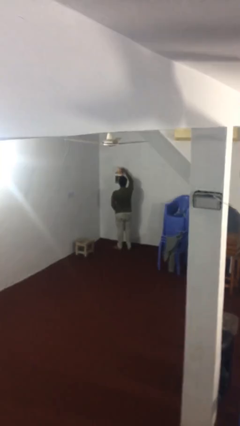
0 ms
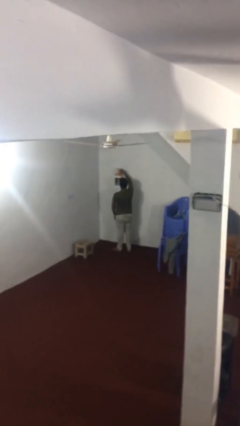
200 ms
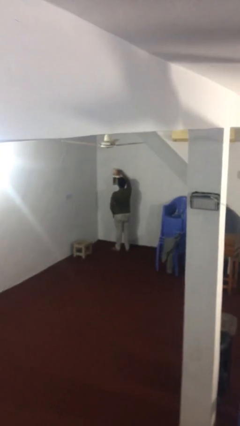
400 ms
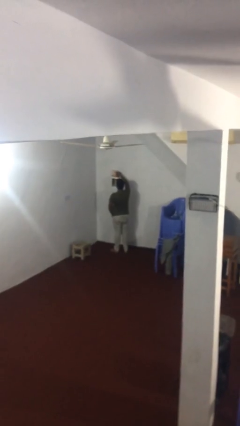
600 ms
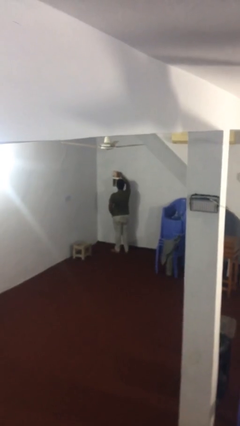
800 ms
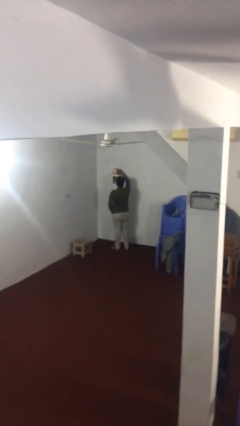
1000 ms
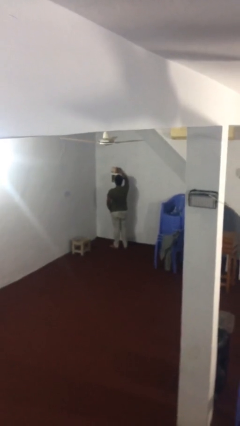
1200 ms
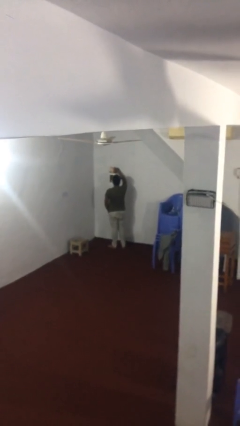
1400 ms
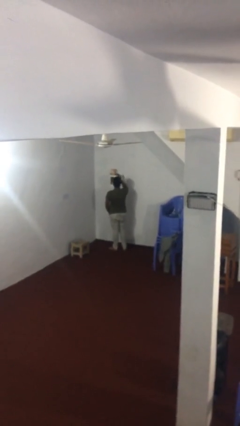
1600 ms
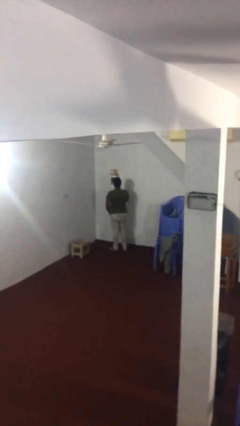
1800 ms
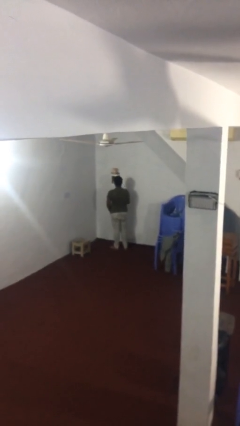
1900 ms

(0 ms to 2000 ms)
person puts down object on shelf

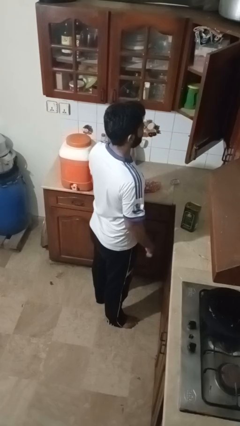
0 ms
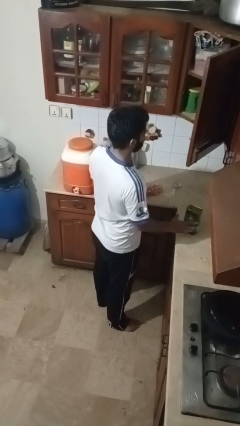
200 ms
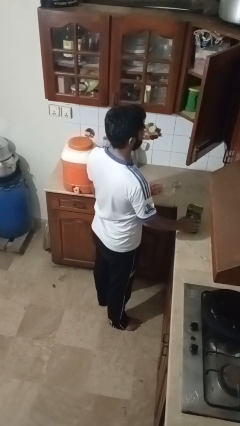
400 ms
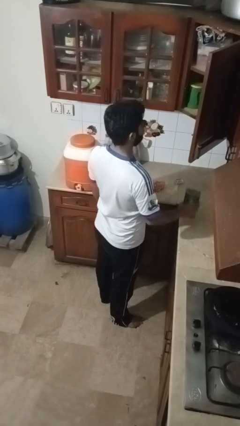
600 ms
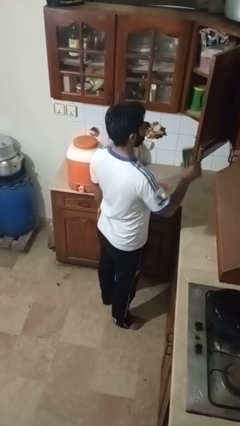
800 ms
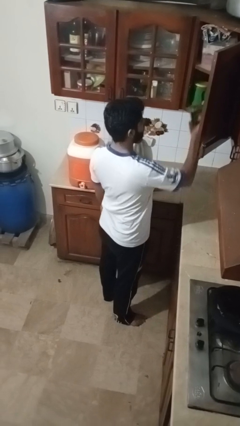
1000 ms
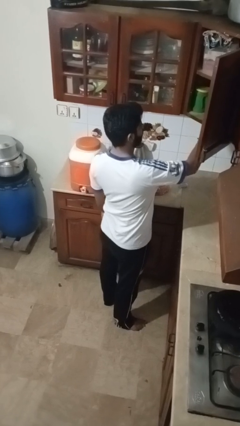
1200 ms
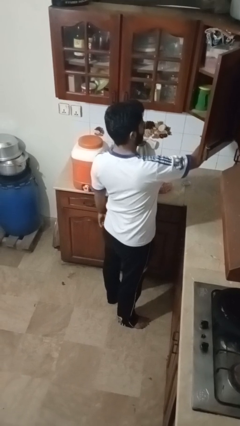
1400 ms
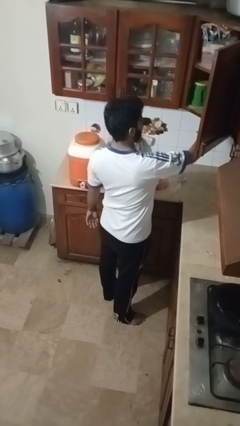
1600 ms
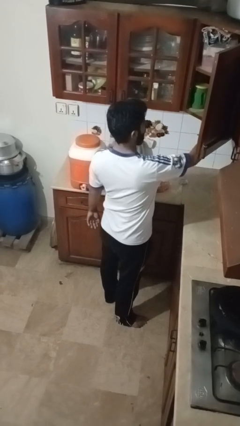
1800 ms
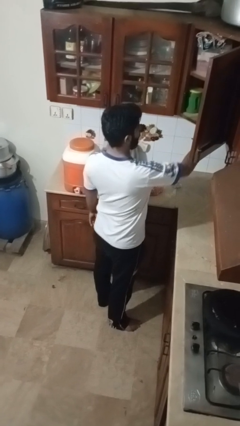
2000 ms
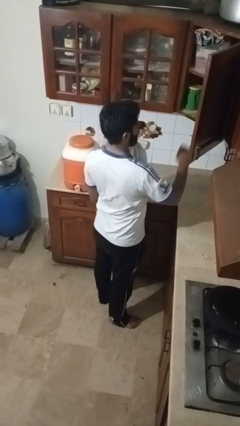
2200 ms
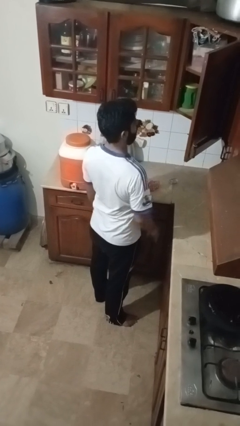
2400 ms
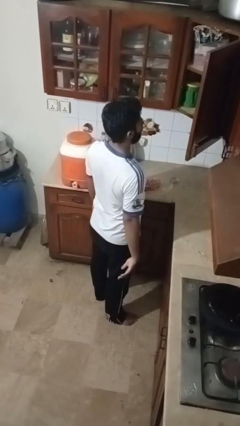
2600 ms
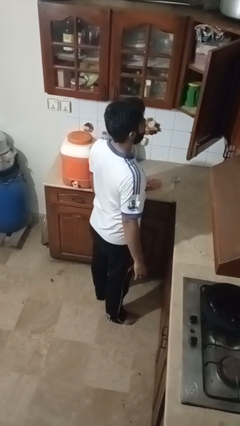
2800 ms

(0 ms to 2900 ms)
person puts object in cabinet

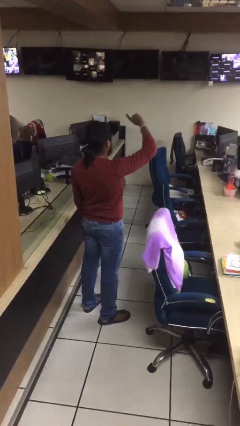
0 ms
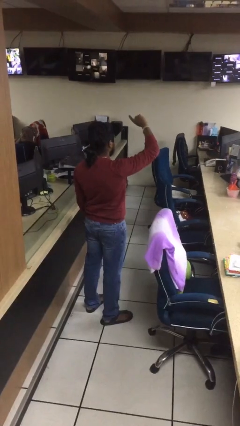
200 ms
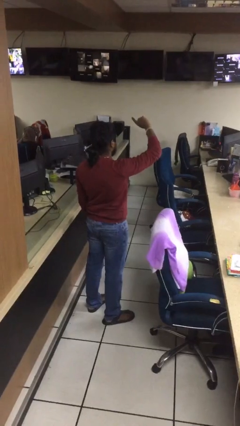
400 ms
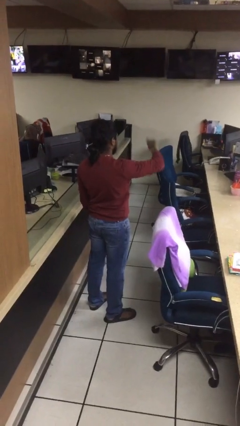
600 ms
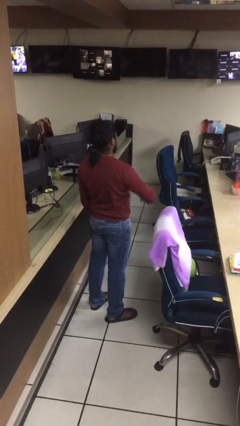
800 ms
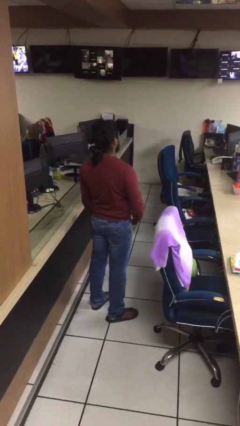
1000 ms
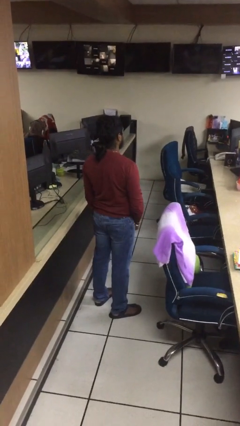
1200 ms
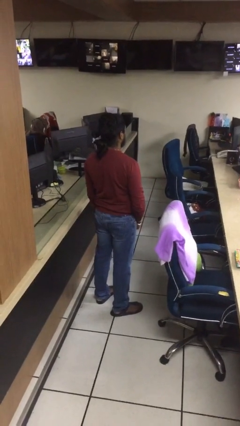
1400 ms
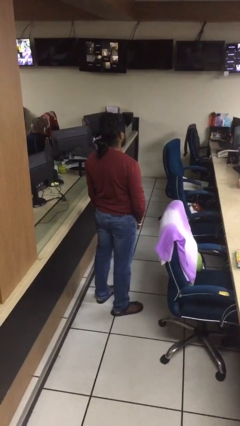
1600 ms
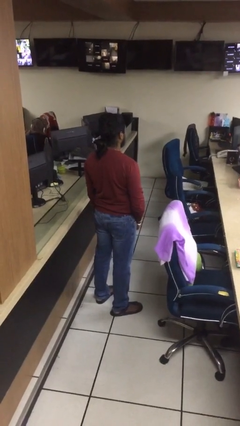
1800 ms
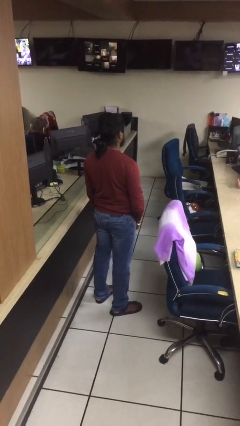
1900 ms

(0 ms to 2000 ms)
person gestures swipe down

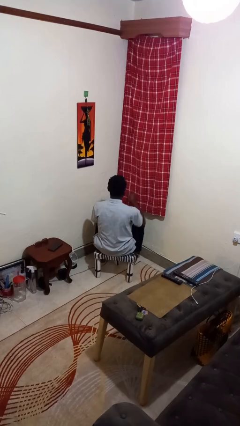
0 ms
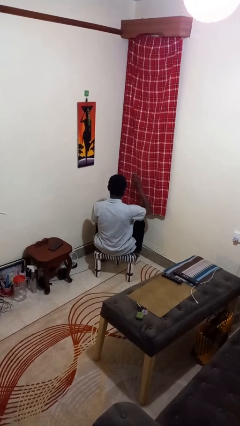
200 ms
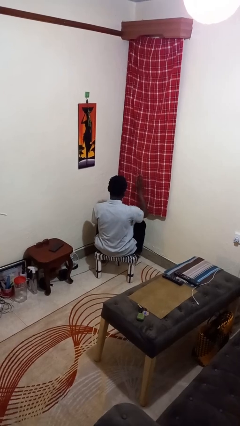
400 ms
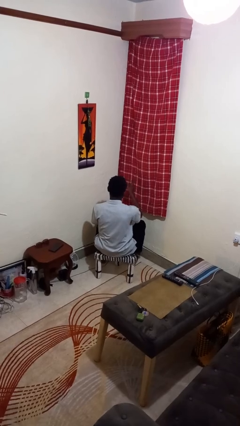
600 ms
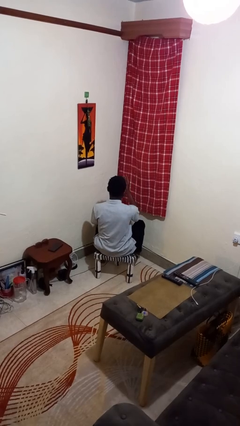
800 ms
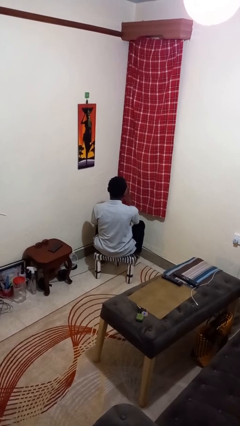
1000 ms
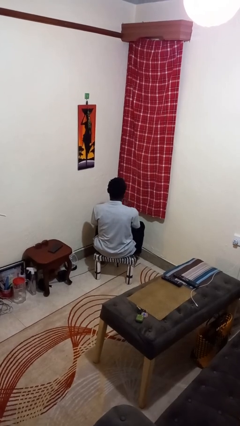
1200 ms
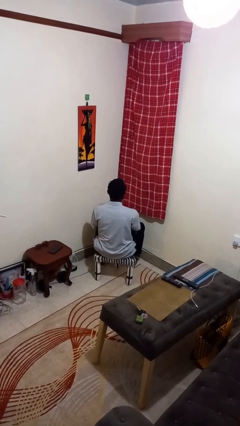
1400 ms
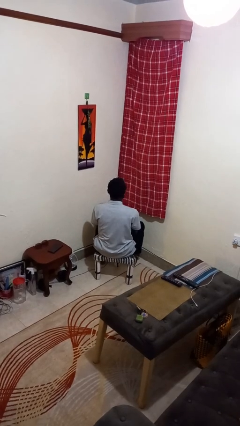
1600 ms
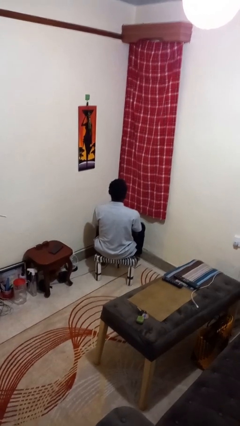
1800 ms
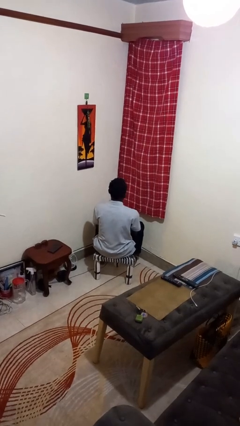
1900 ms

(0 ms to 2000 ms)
person gestures swipe left

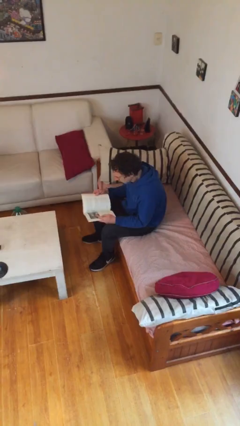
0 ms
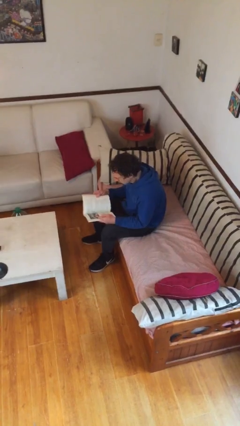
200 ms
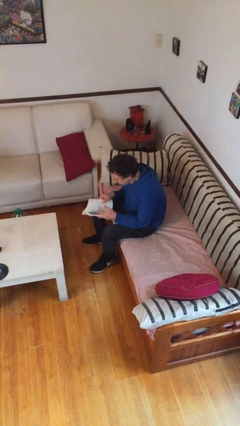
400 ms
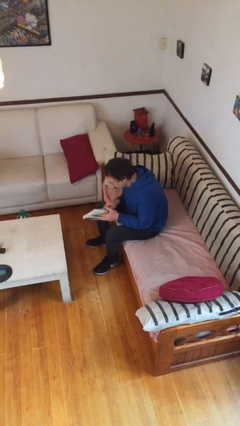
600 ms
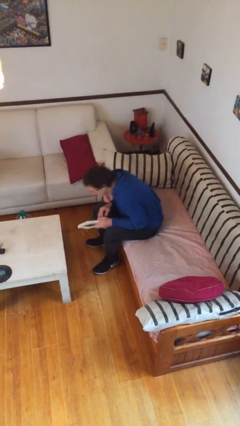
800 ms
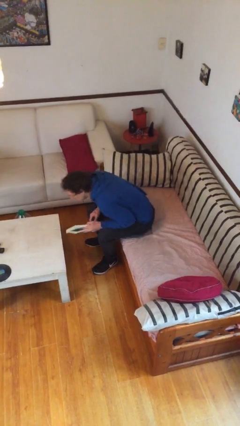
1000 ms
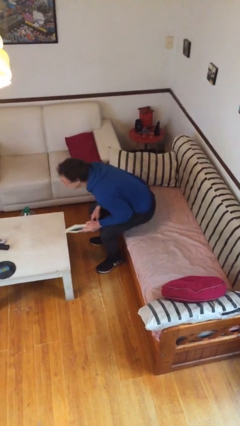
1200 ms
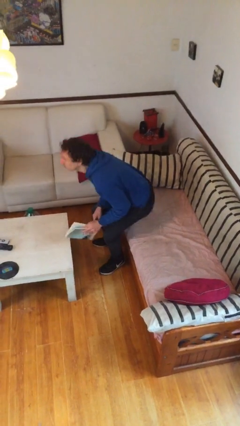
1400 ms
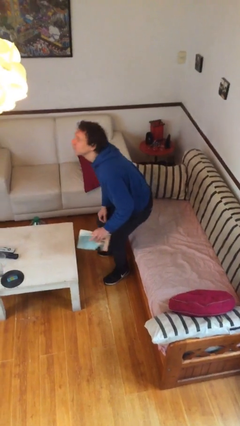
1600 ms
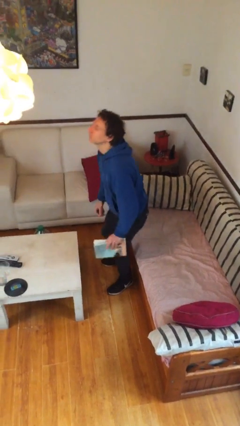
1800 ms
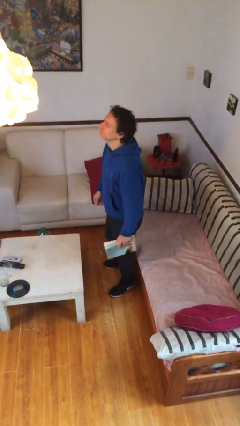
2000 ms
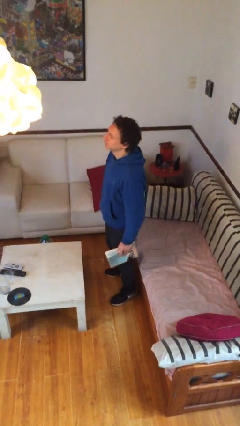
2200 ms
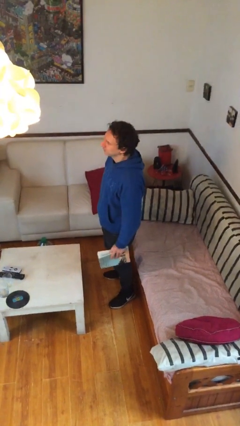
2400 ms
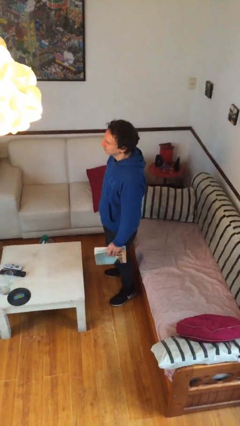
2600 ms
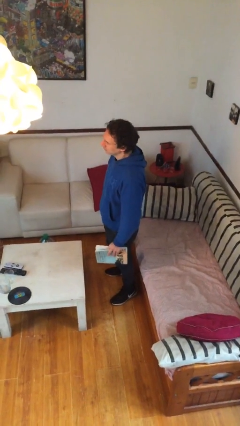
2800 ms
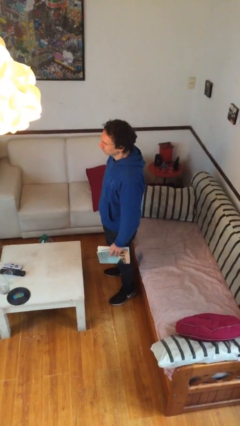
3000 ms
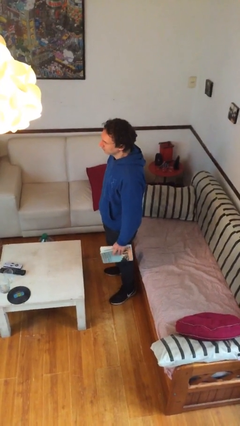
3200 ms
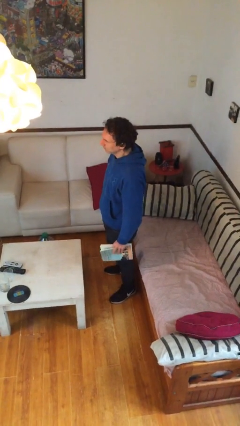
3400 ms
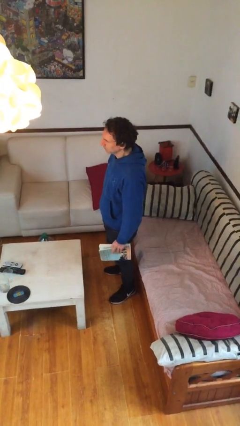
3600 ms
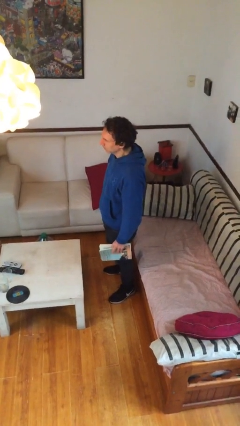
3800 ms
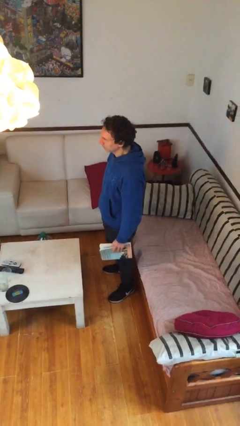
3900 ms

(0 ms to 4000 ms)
person stands up

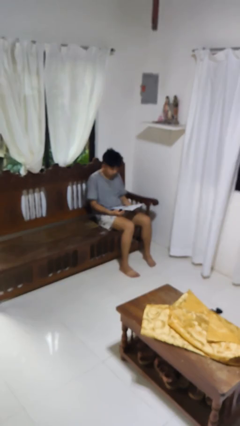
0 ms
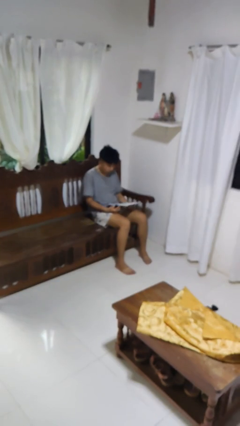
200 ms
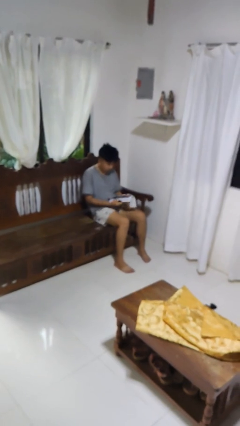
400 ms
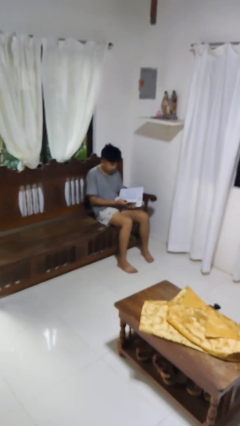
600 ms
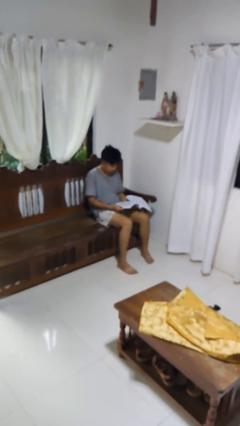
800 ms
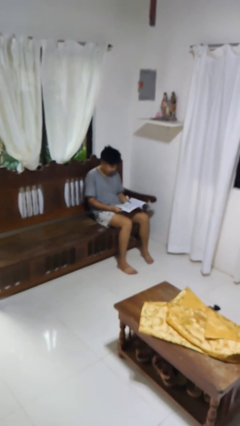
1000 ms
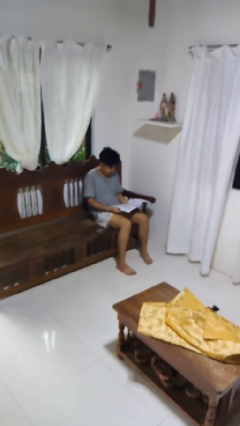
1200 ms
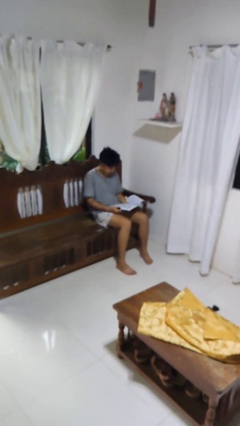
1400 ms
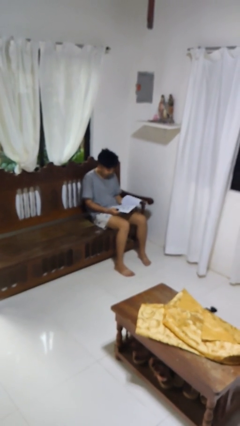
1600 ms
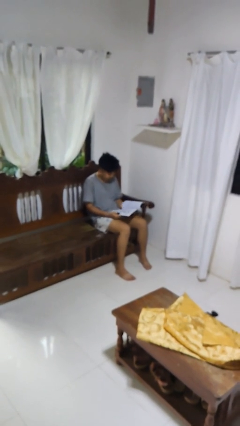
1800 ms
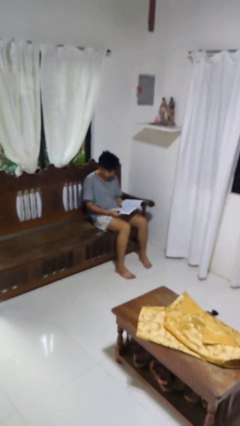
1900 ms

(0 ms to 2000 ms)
person reads newspaper

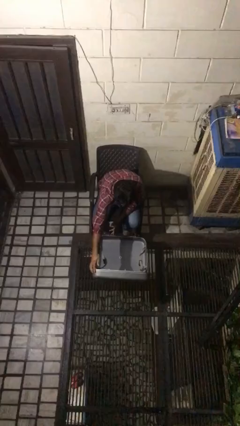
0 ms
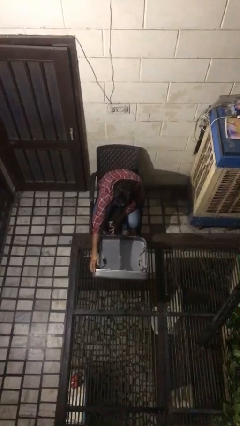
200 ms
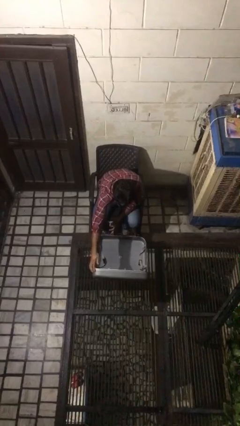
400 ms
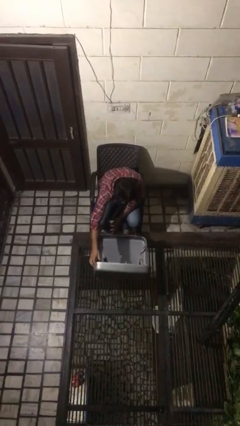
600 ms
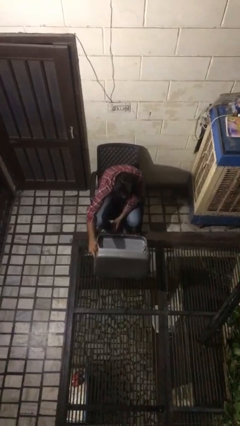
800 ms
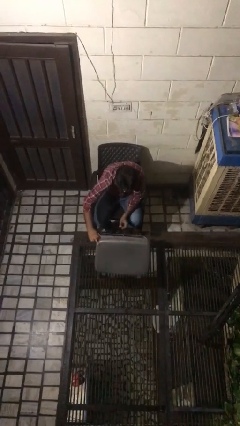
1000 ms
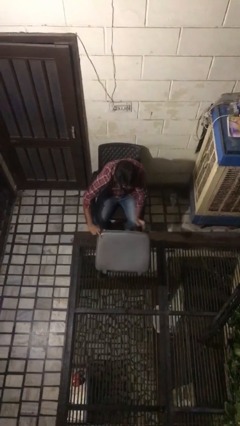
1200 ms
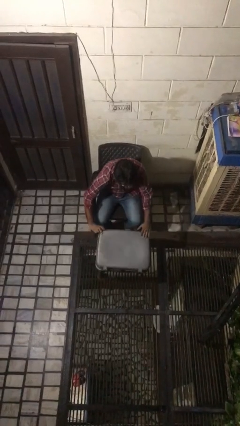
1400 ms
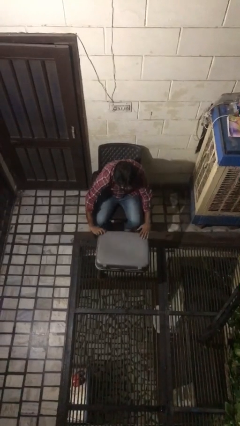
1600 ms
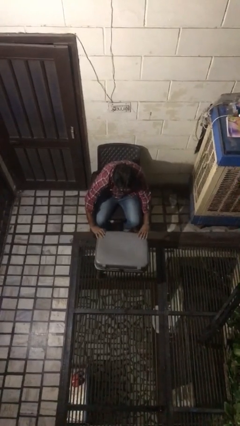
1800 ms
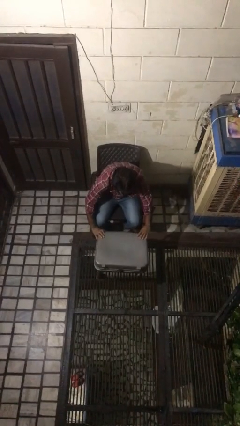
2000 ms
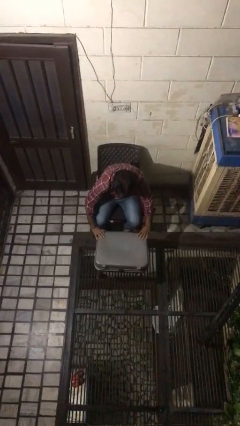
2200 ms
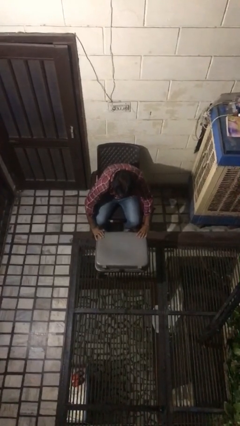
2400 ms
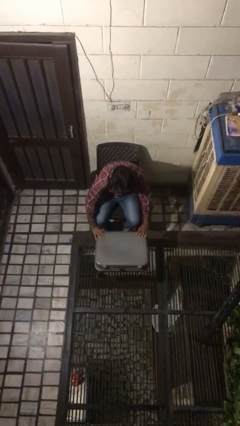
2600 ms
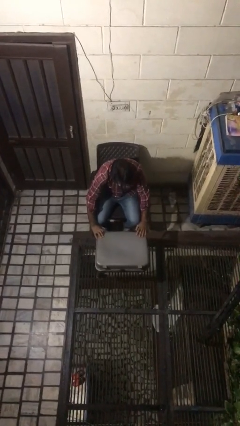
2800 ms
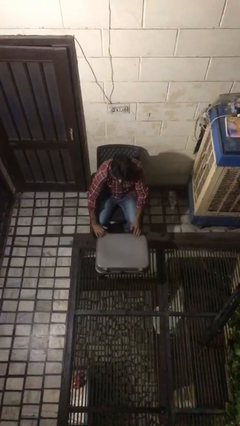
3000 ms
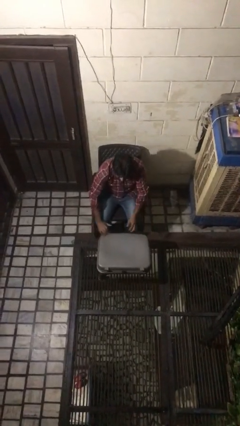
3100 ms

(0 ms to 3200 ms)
person closes suitcase
